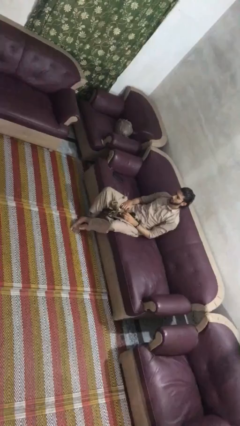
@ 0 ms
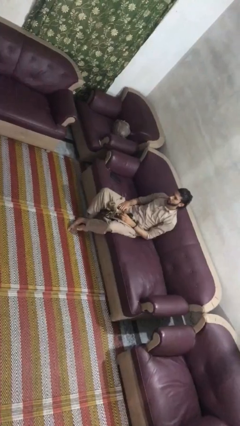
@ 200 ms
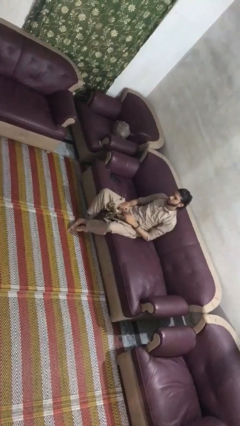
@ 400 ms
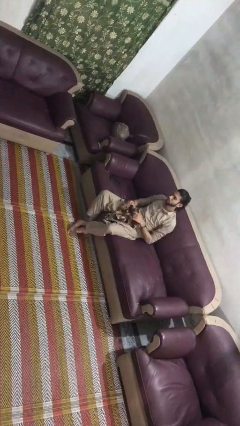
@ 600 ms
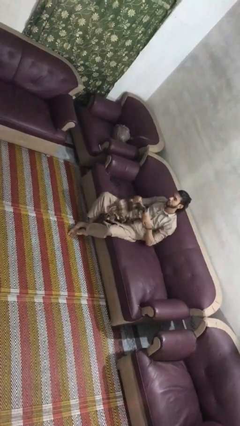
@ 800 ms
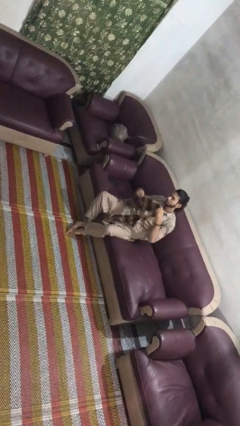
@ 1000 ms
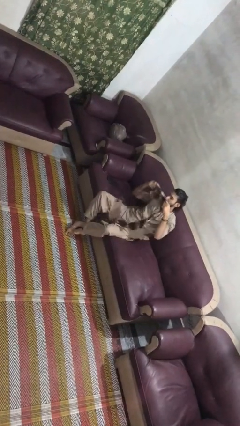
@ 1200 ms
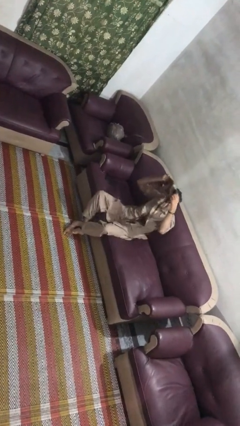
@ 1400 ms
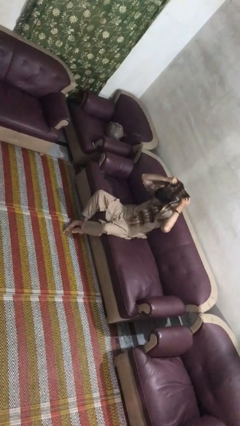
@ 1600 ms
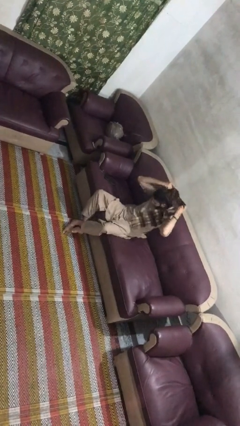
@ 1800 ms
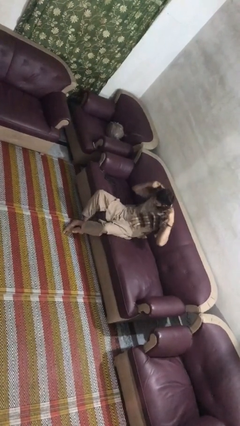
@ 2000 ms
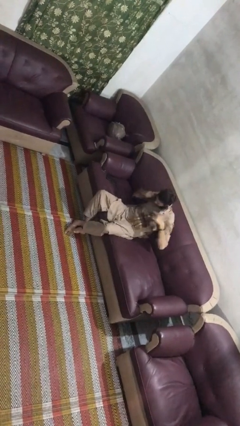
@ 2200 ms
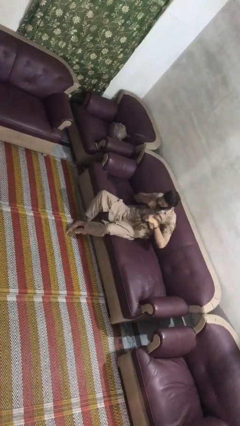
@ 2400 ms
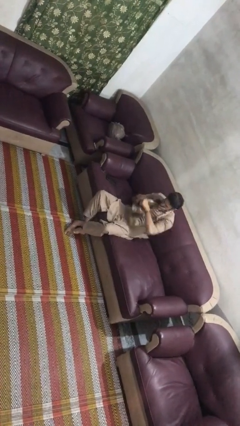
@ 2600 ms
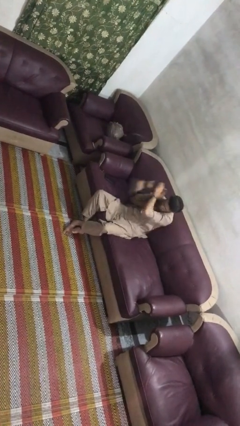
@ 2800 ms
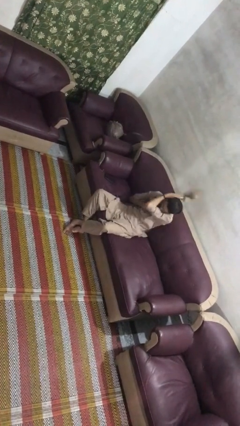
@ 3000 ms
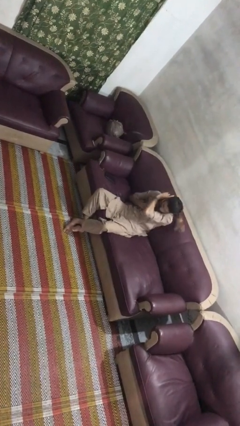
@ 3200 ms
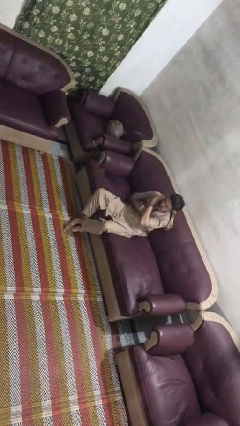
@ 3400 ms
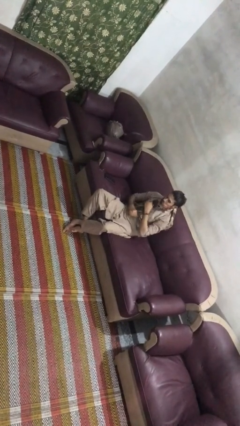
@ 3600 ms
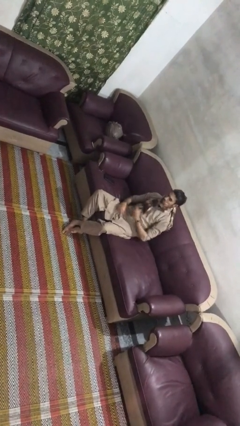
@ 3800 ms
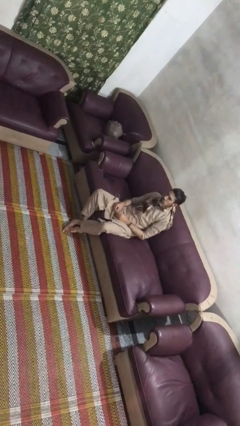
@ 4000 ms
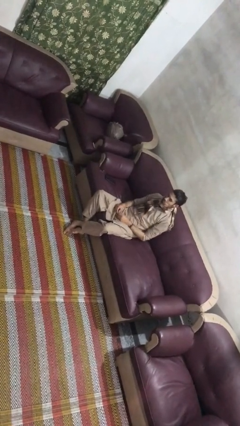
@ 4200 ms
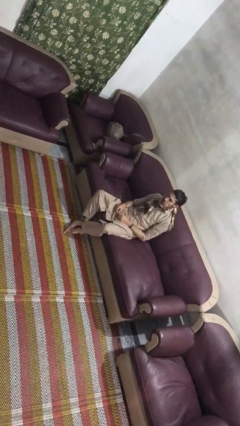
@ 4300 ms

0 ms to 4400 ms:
person puts on scarf

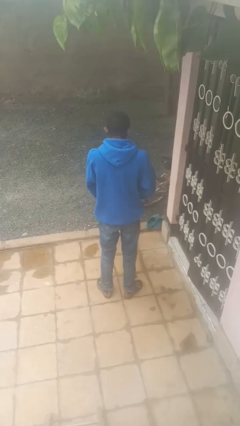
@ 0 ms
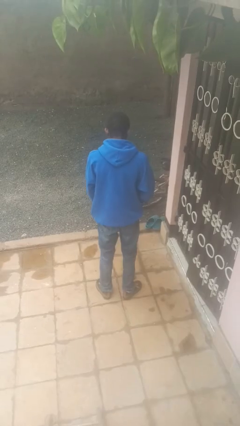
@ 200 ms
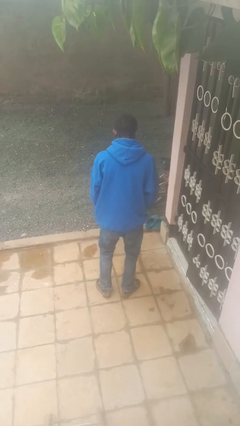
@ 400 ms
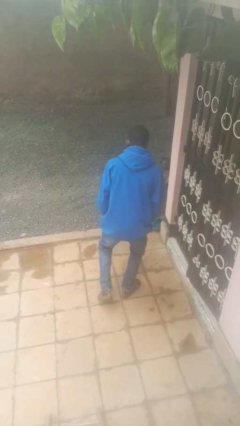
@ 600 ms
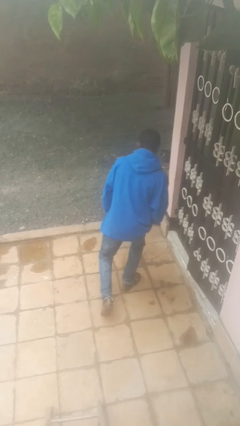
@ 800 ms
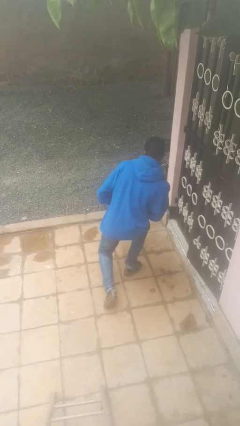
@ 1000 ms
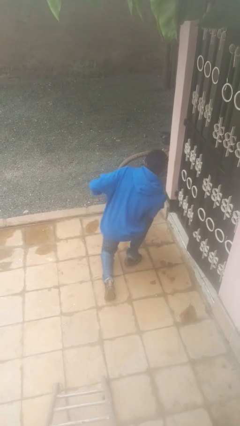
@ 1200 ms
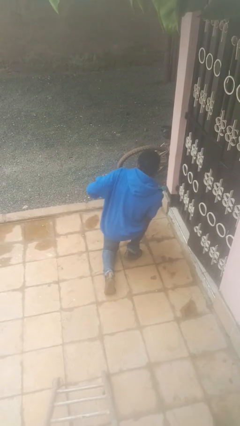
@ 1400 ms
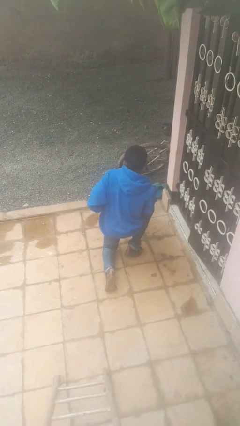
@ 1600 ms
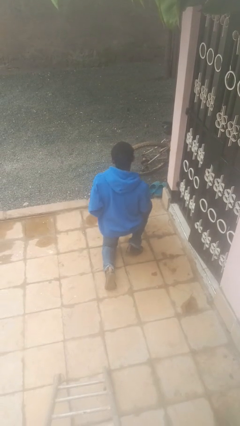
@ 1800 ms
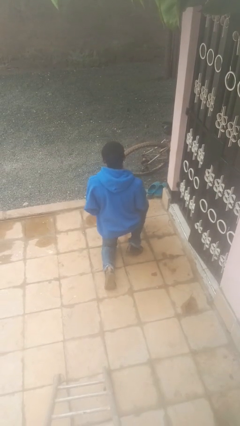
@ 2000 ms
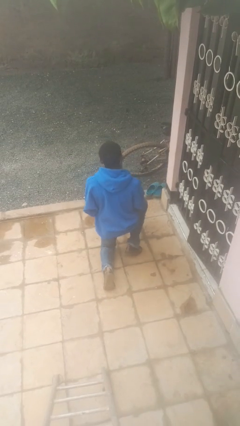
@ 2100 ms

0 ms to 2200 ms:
person kneels

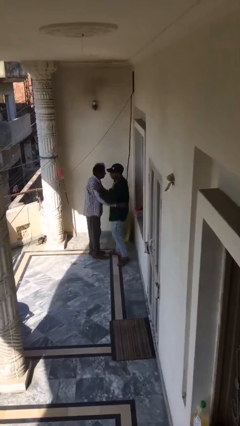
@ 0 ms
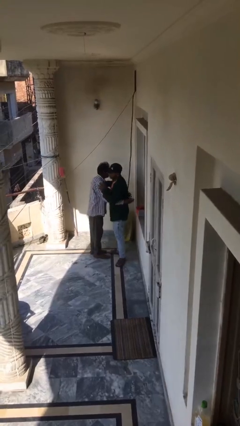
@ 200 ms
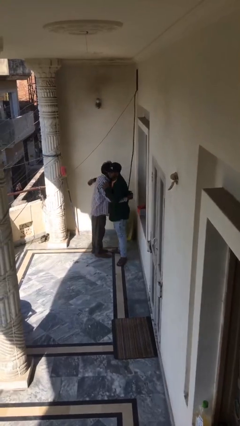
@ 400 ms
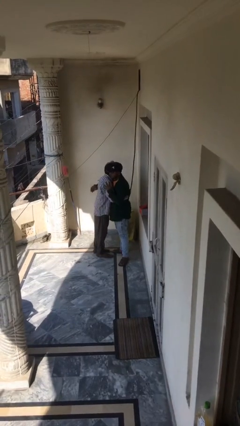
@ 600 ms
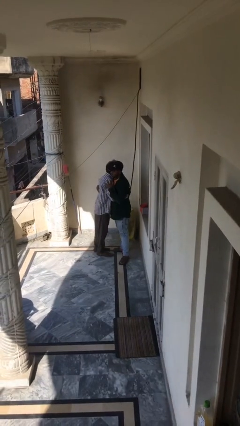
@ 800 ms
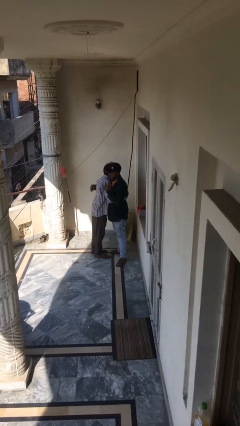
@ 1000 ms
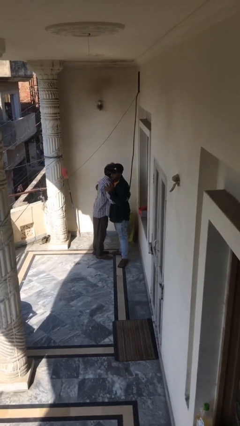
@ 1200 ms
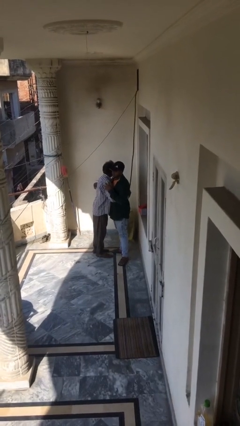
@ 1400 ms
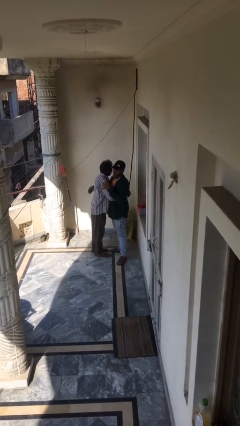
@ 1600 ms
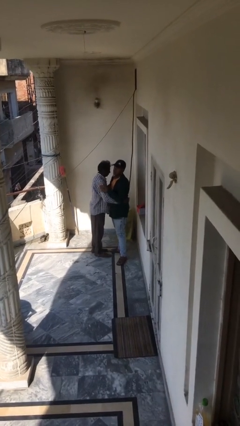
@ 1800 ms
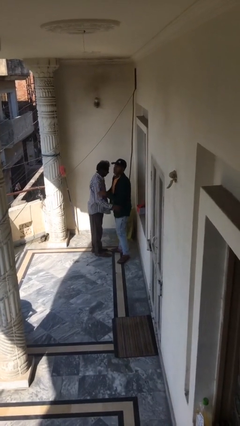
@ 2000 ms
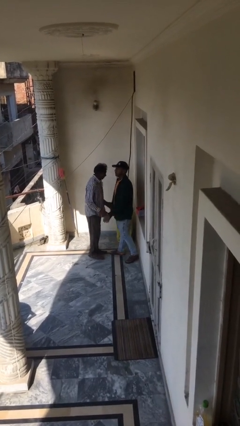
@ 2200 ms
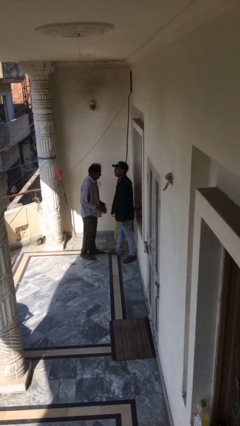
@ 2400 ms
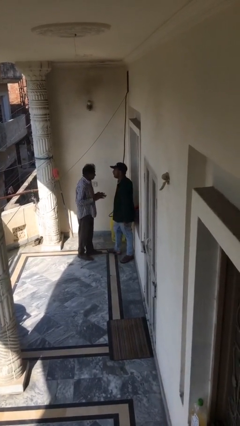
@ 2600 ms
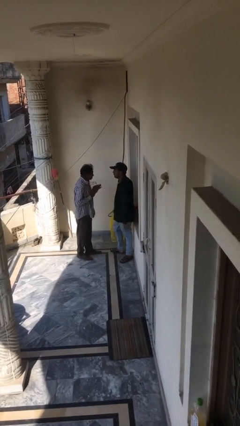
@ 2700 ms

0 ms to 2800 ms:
person embraces person

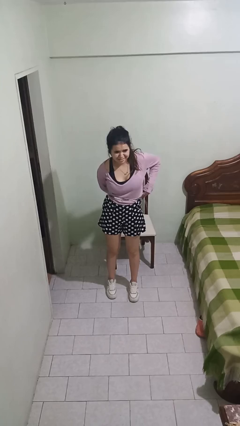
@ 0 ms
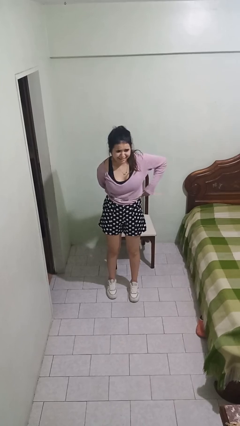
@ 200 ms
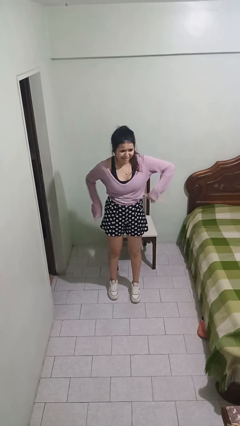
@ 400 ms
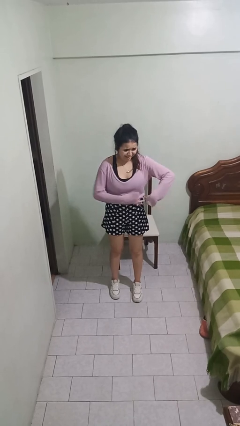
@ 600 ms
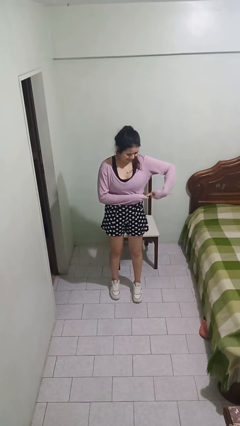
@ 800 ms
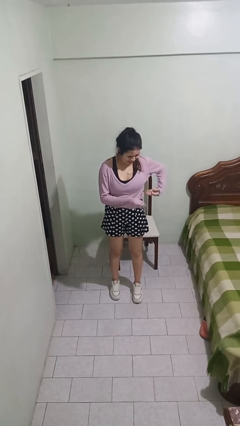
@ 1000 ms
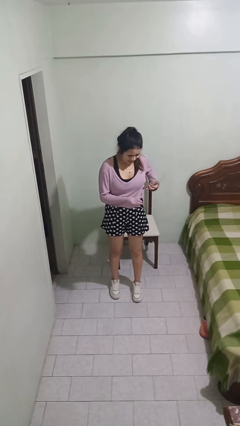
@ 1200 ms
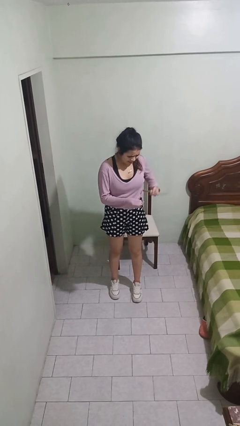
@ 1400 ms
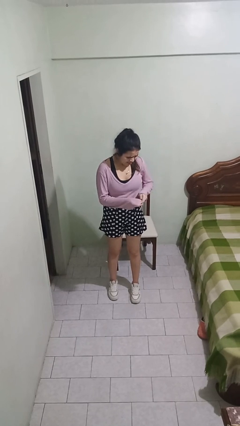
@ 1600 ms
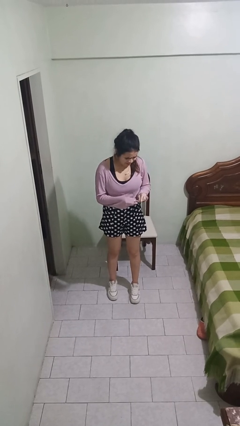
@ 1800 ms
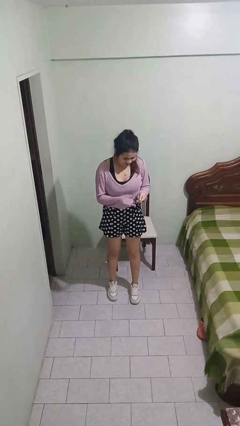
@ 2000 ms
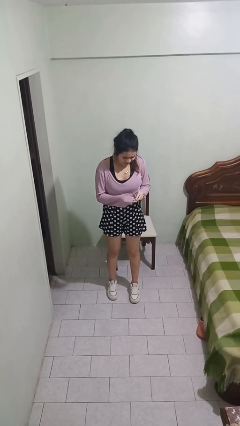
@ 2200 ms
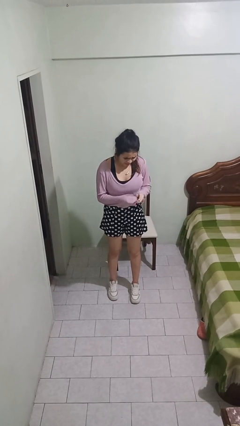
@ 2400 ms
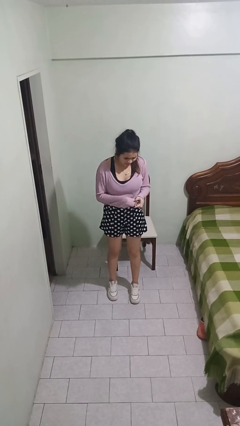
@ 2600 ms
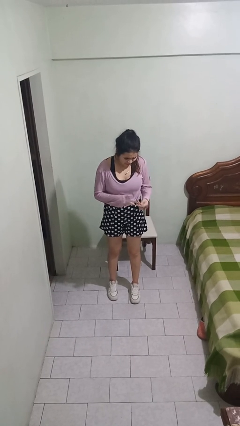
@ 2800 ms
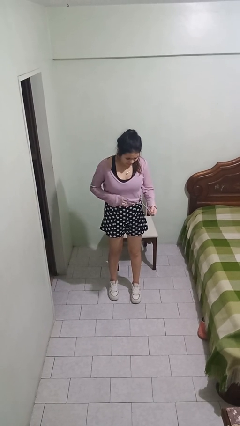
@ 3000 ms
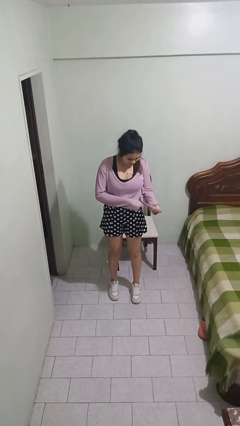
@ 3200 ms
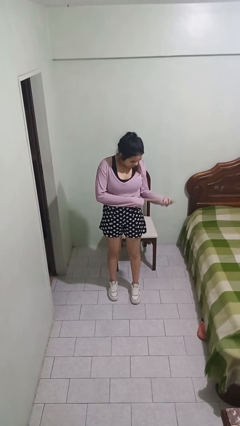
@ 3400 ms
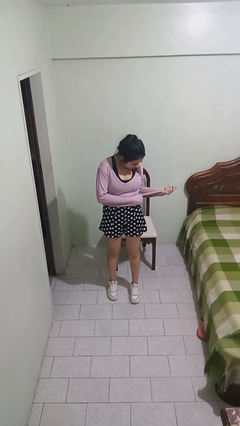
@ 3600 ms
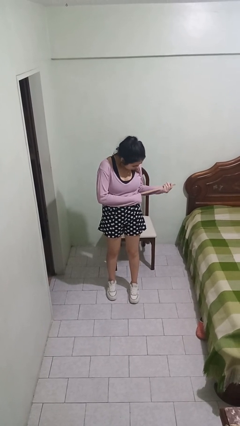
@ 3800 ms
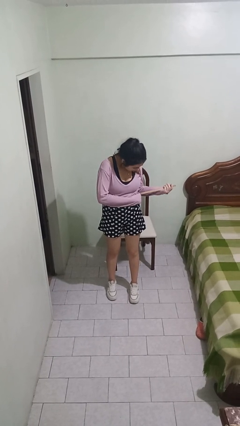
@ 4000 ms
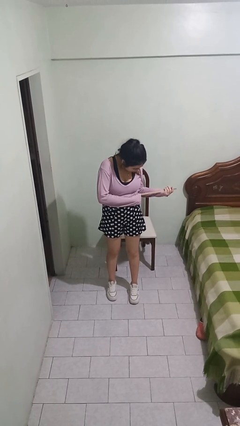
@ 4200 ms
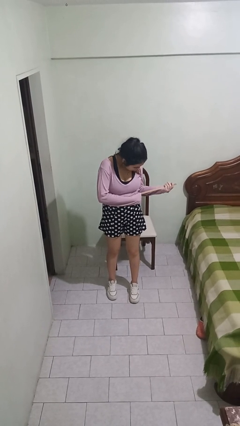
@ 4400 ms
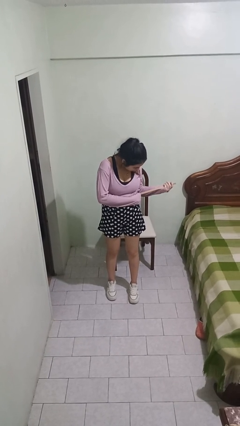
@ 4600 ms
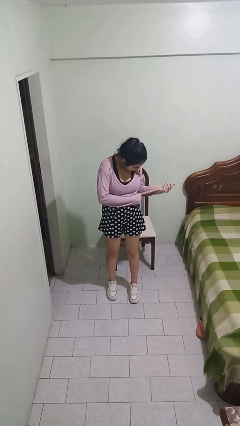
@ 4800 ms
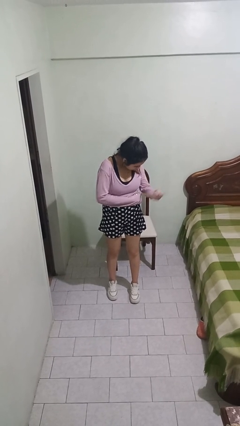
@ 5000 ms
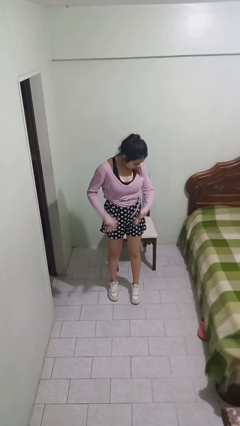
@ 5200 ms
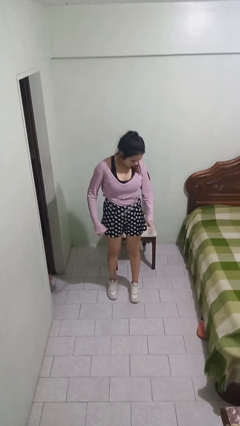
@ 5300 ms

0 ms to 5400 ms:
person puts on belt

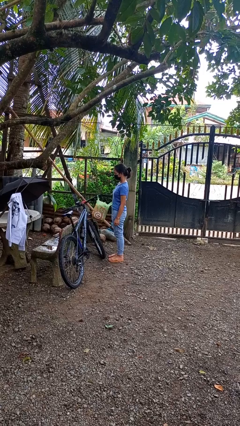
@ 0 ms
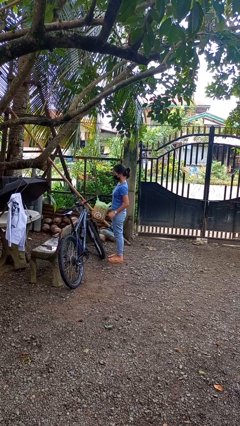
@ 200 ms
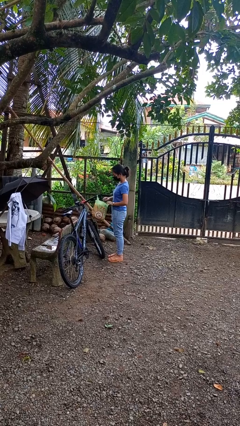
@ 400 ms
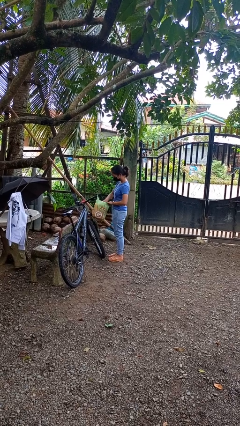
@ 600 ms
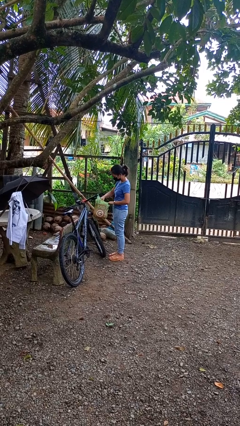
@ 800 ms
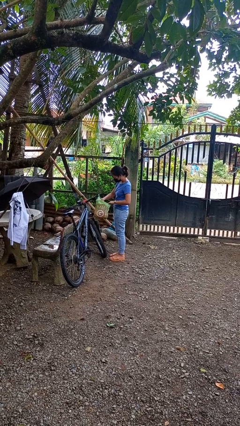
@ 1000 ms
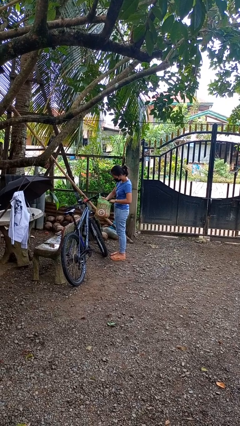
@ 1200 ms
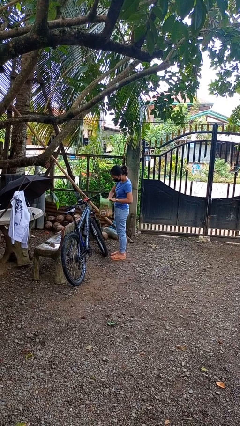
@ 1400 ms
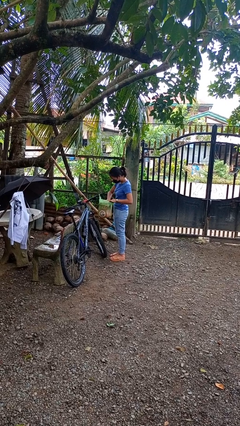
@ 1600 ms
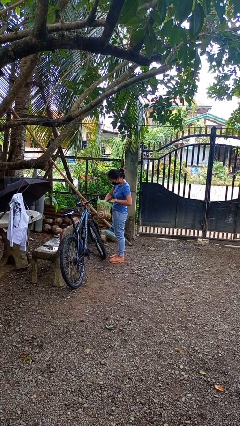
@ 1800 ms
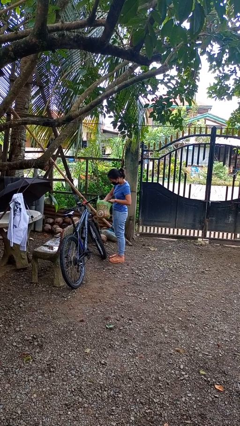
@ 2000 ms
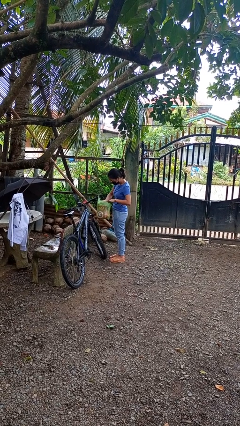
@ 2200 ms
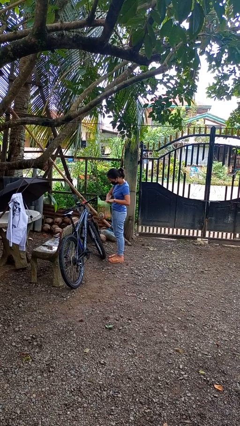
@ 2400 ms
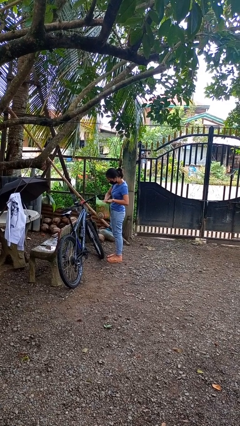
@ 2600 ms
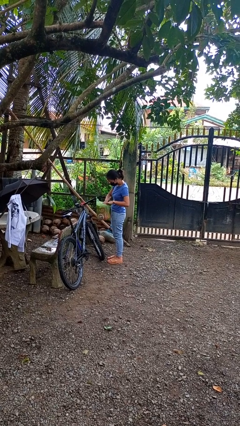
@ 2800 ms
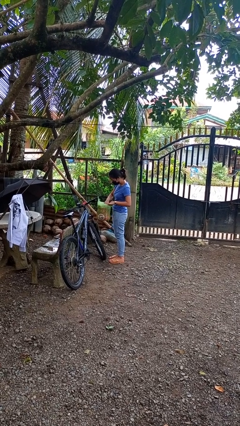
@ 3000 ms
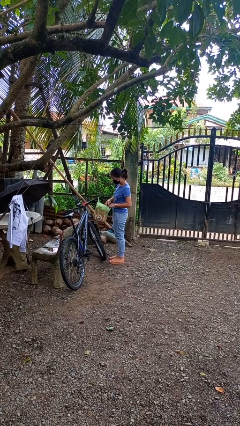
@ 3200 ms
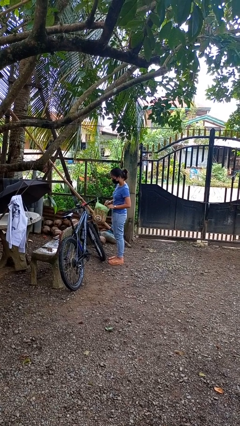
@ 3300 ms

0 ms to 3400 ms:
person searches in bag
